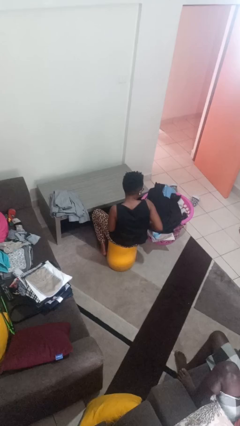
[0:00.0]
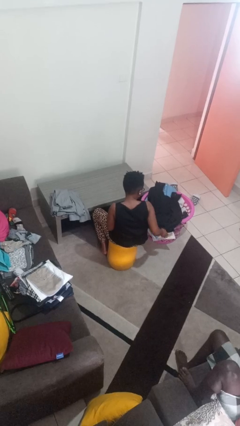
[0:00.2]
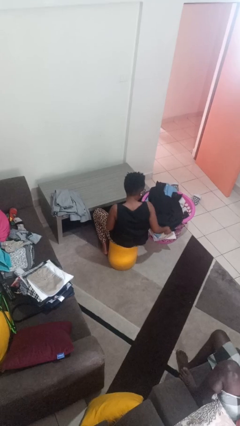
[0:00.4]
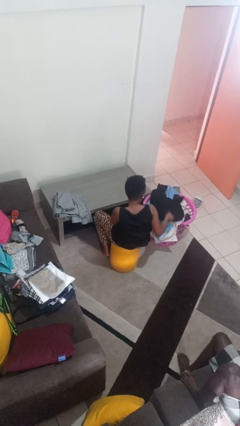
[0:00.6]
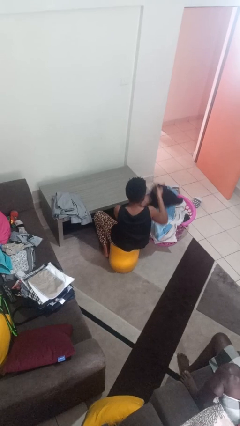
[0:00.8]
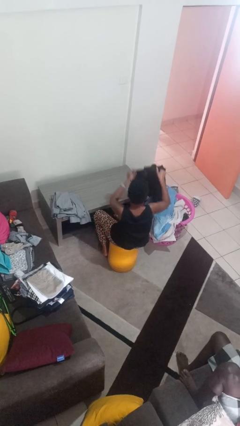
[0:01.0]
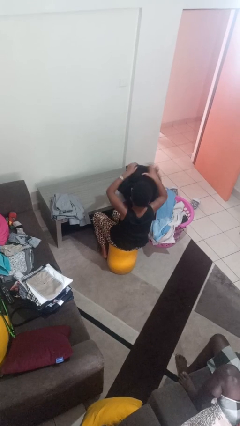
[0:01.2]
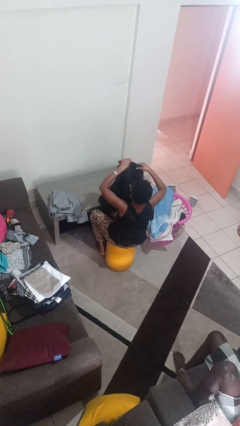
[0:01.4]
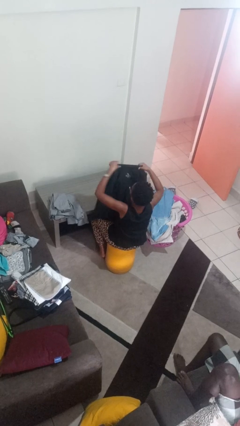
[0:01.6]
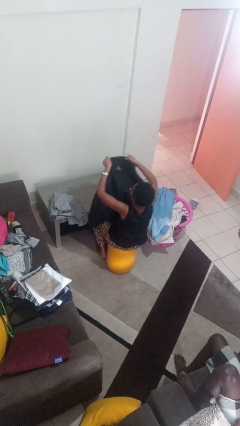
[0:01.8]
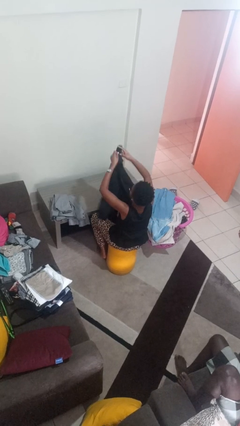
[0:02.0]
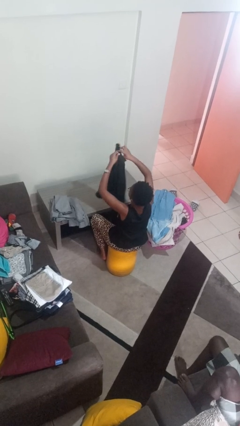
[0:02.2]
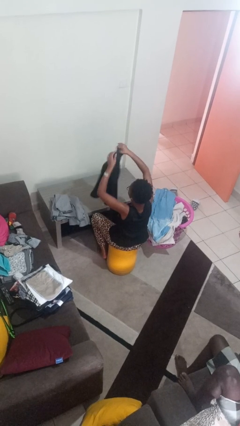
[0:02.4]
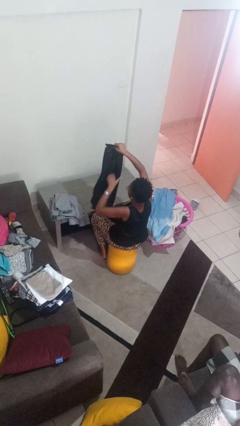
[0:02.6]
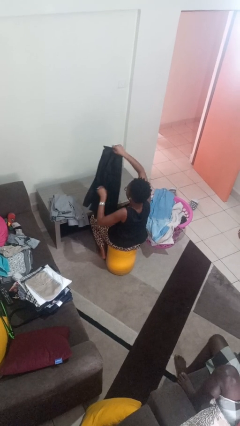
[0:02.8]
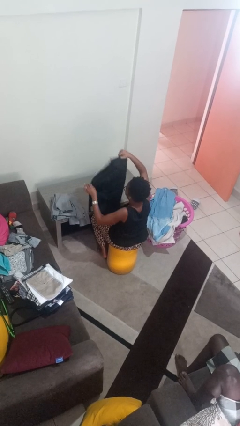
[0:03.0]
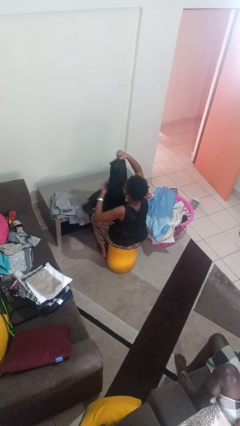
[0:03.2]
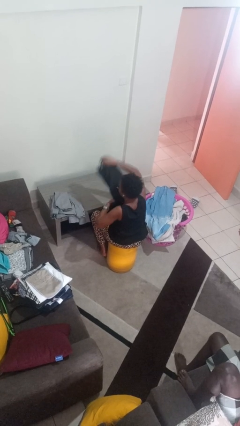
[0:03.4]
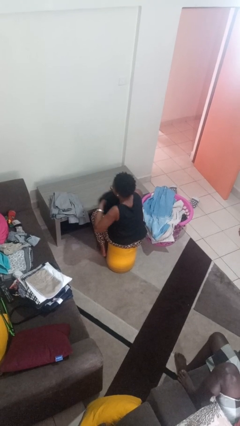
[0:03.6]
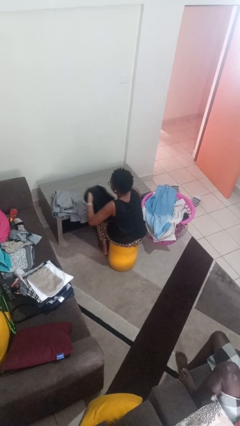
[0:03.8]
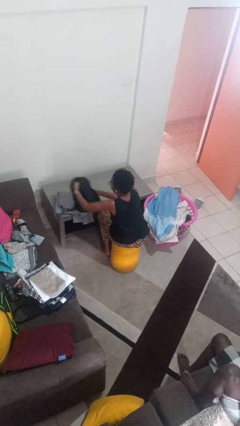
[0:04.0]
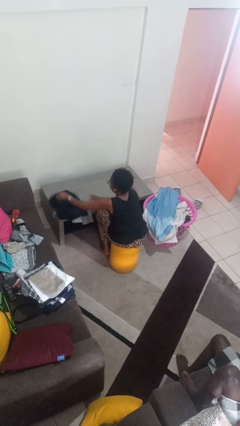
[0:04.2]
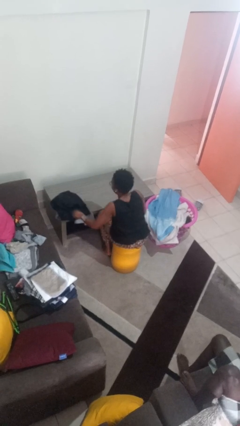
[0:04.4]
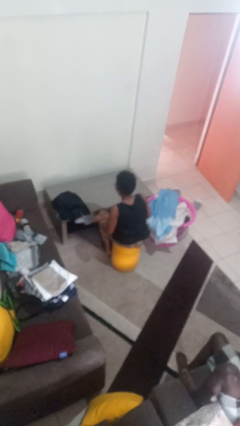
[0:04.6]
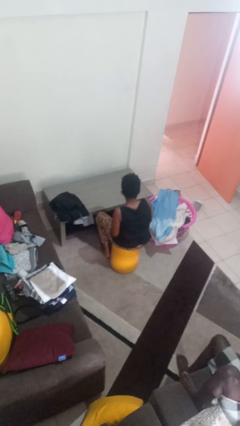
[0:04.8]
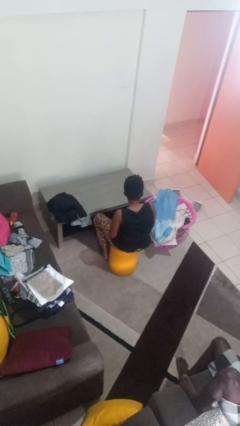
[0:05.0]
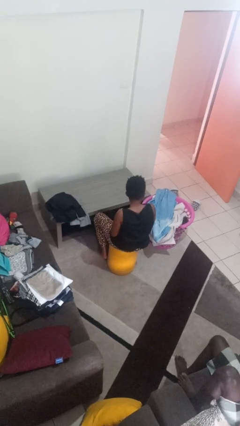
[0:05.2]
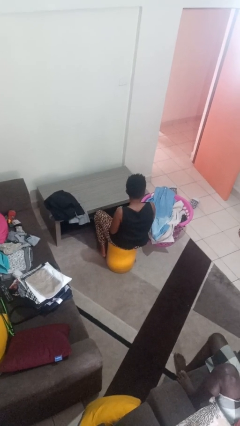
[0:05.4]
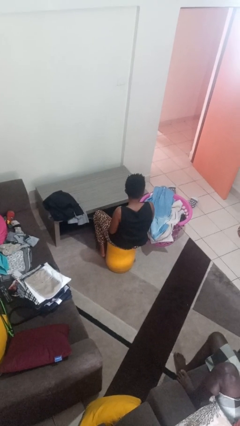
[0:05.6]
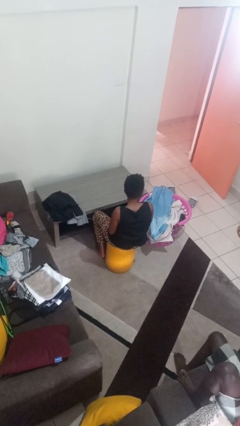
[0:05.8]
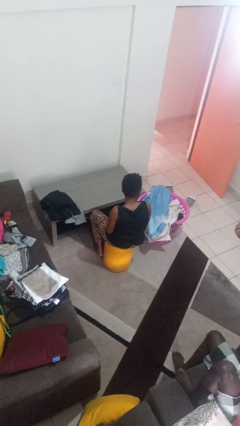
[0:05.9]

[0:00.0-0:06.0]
person folds shirt

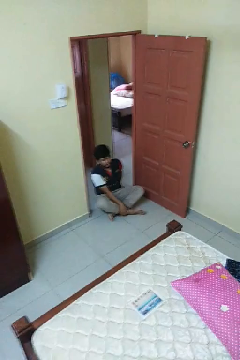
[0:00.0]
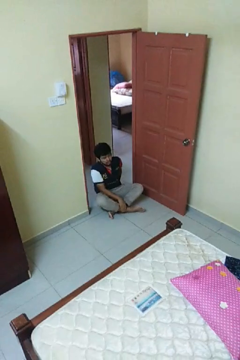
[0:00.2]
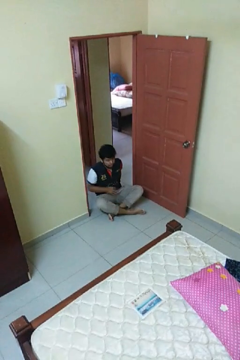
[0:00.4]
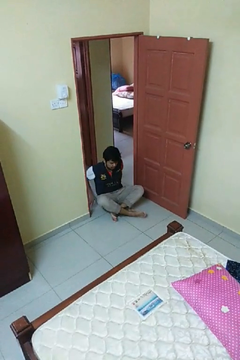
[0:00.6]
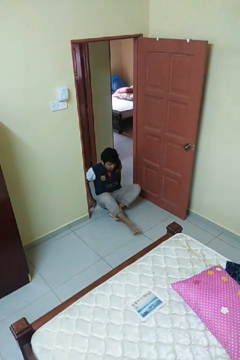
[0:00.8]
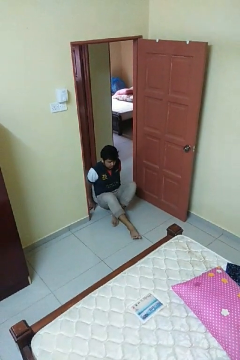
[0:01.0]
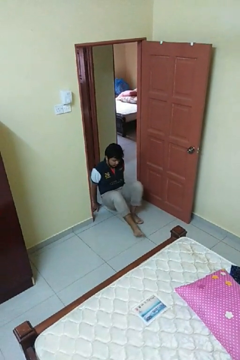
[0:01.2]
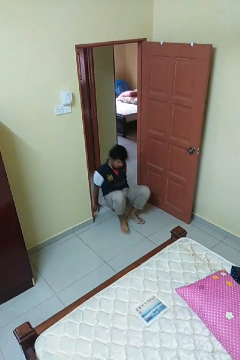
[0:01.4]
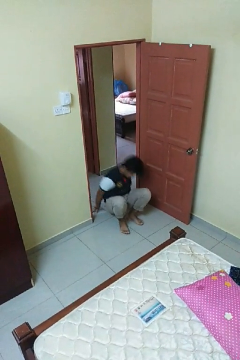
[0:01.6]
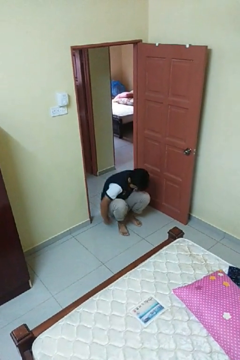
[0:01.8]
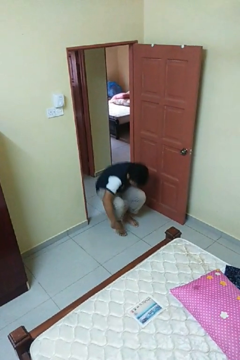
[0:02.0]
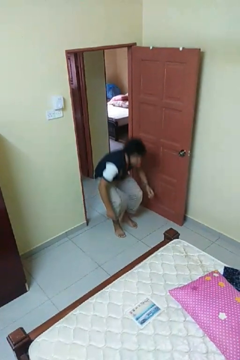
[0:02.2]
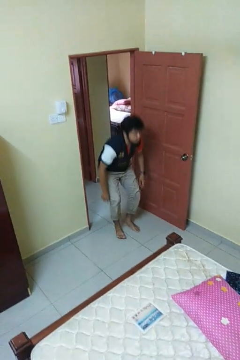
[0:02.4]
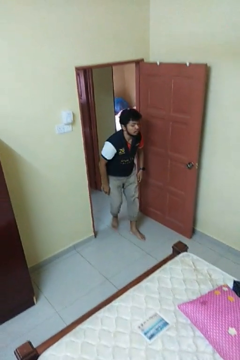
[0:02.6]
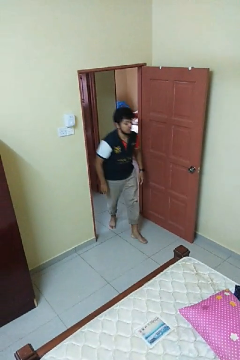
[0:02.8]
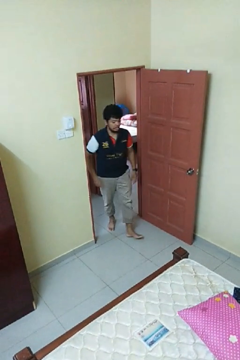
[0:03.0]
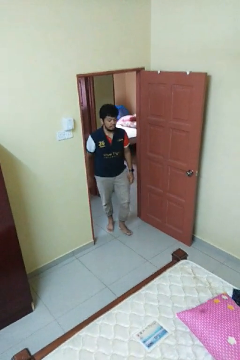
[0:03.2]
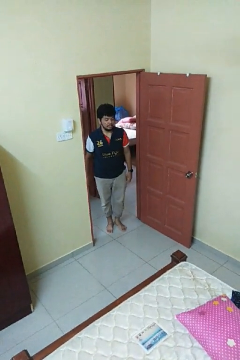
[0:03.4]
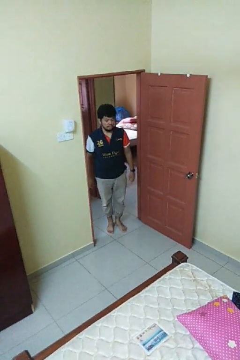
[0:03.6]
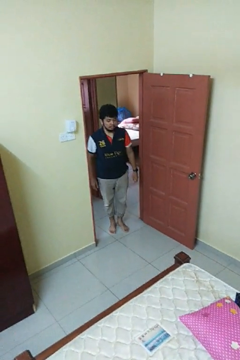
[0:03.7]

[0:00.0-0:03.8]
person stands up from floor

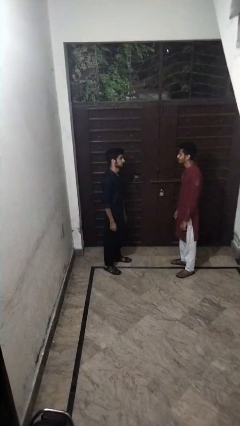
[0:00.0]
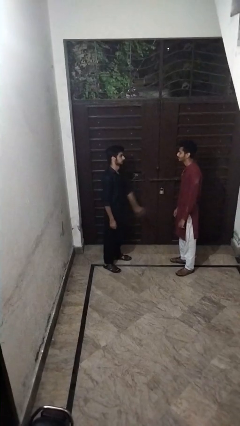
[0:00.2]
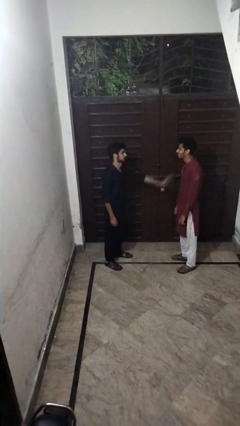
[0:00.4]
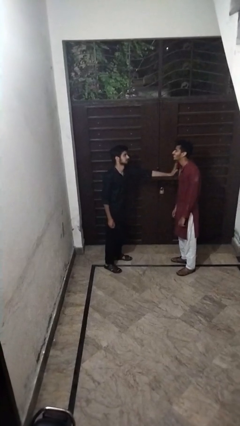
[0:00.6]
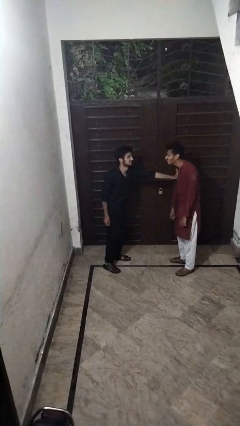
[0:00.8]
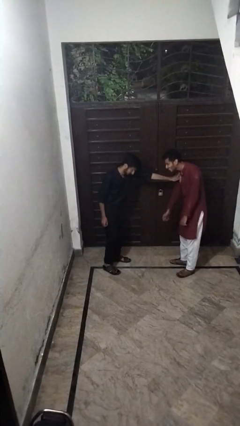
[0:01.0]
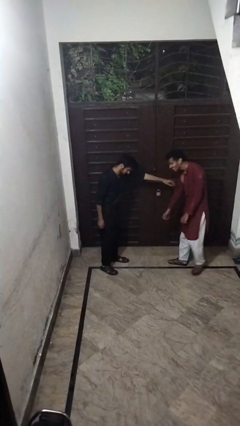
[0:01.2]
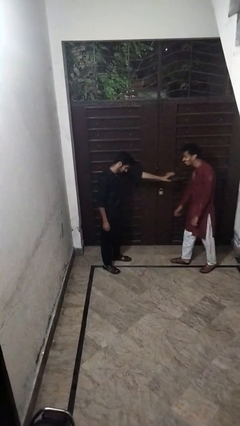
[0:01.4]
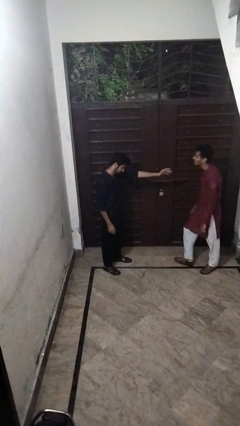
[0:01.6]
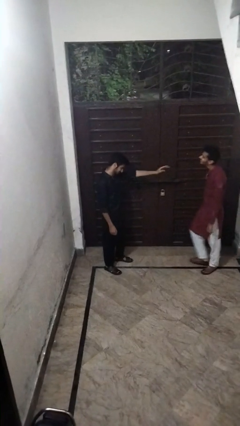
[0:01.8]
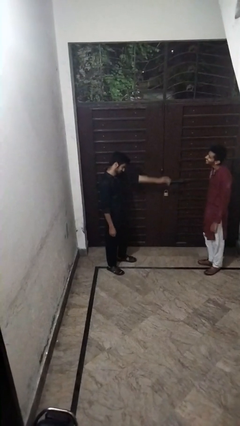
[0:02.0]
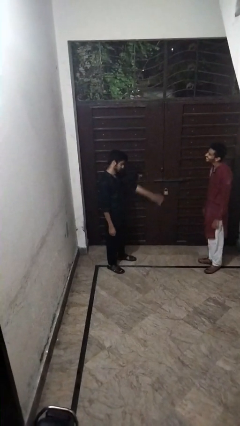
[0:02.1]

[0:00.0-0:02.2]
person shoves person

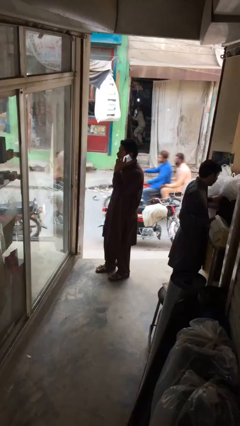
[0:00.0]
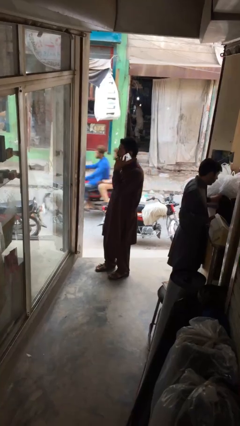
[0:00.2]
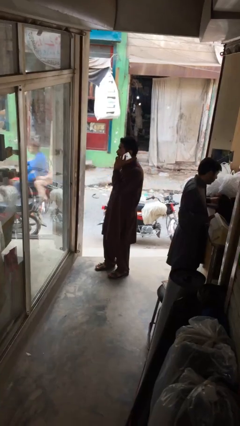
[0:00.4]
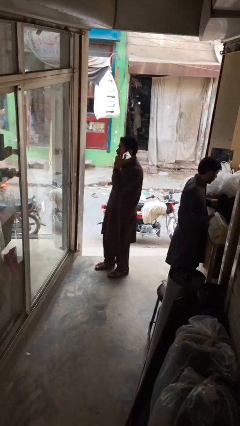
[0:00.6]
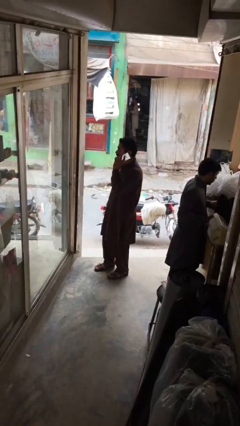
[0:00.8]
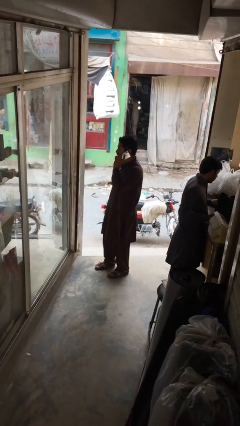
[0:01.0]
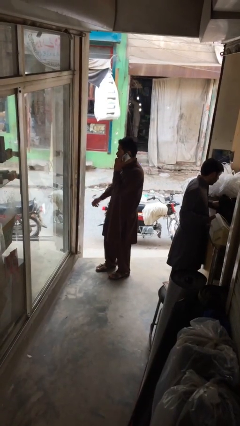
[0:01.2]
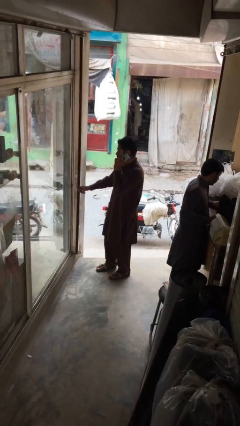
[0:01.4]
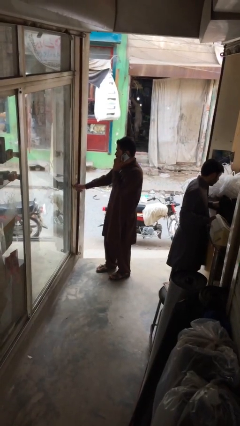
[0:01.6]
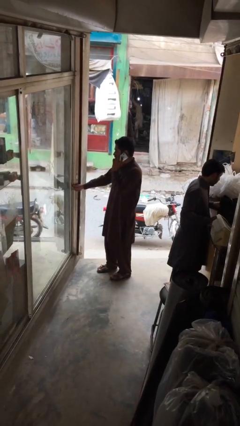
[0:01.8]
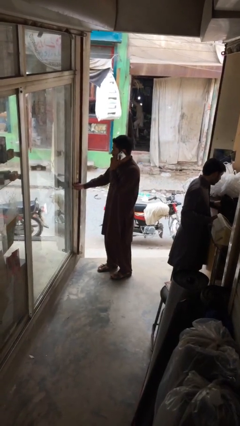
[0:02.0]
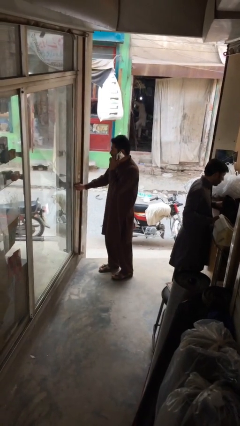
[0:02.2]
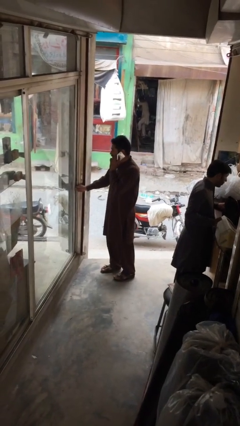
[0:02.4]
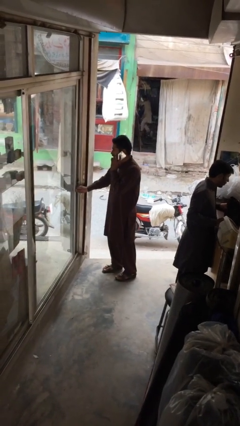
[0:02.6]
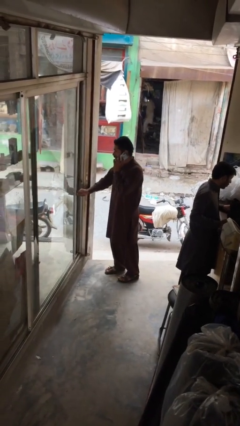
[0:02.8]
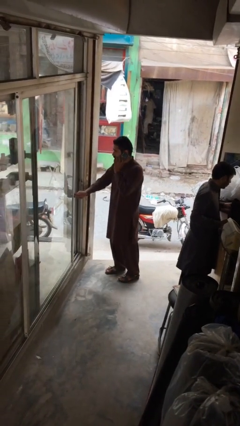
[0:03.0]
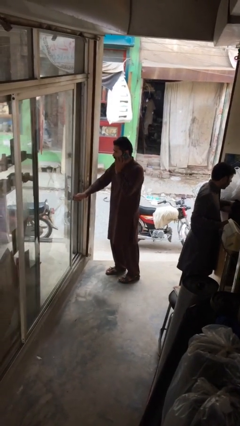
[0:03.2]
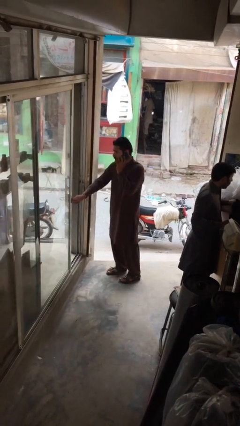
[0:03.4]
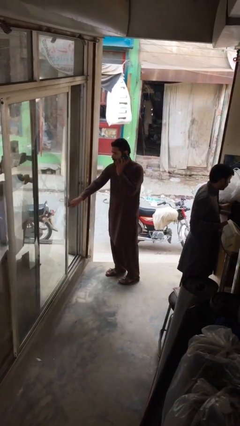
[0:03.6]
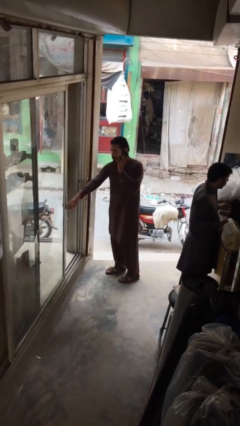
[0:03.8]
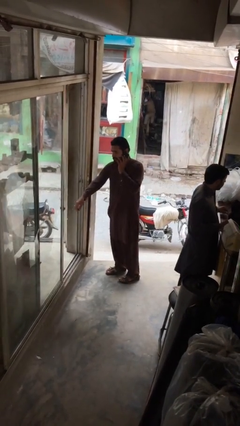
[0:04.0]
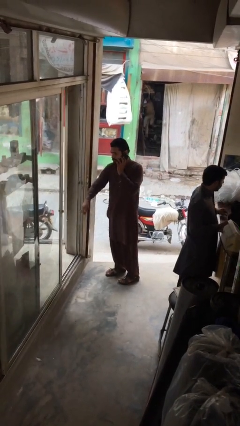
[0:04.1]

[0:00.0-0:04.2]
person opens facility door

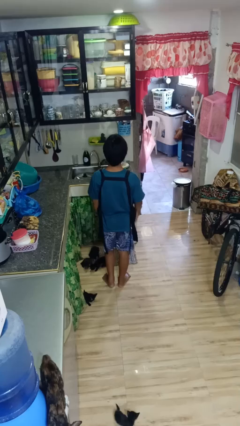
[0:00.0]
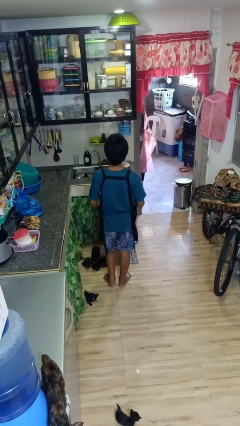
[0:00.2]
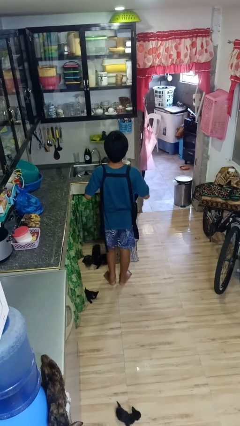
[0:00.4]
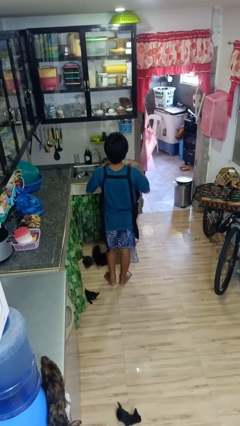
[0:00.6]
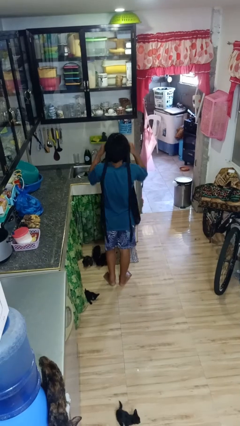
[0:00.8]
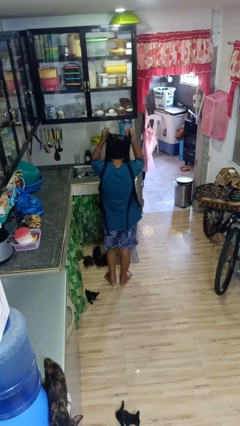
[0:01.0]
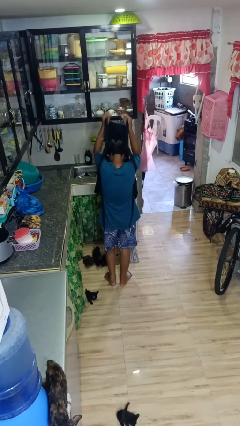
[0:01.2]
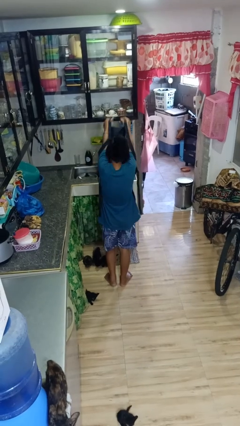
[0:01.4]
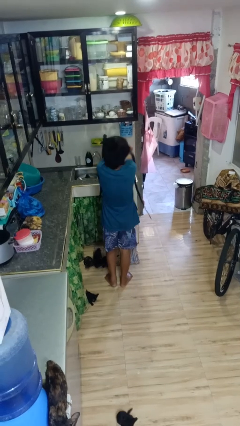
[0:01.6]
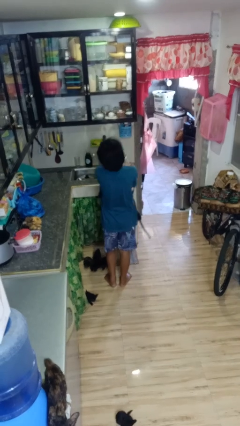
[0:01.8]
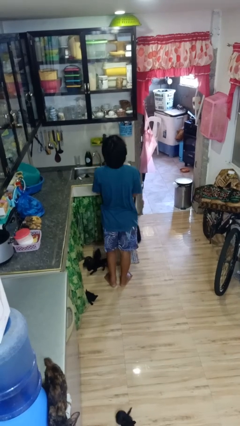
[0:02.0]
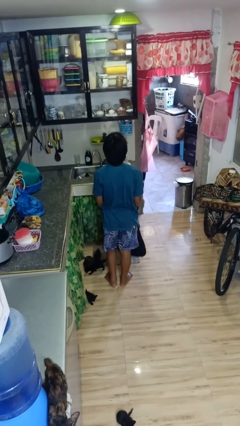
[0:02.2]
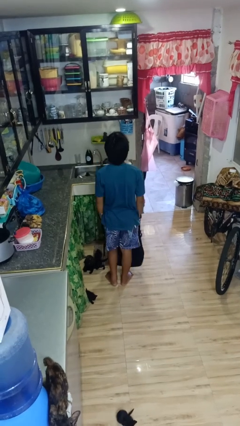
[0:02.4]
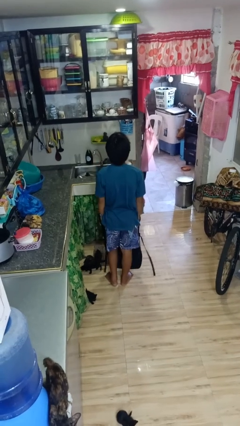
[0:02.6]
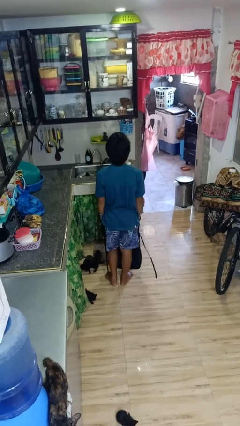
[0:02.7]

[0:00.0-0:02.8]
person takes off apron
